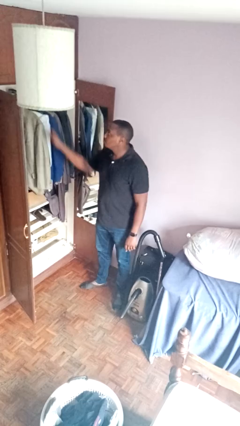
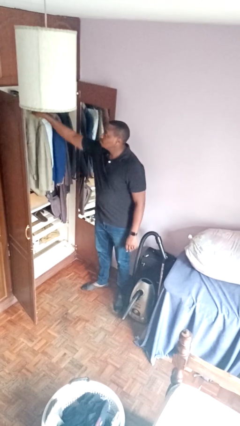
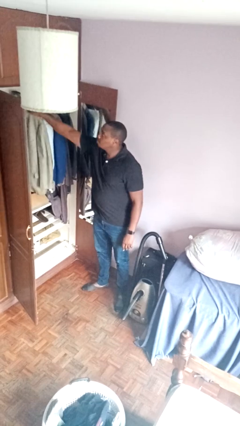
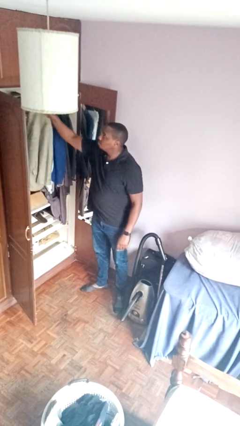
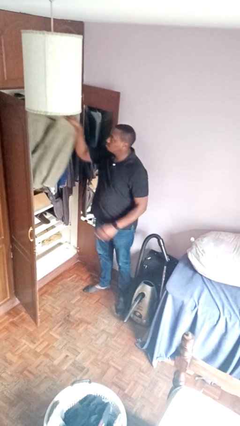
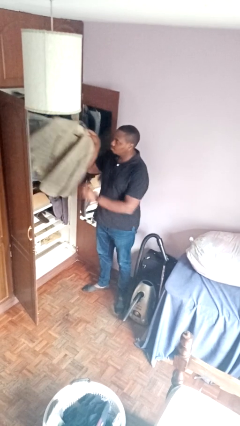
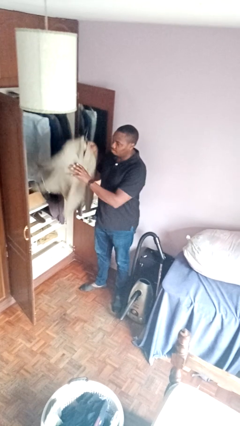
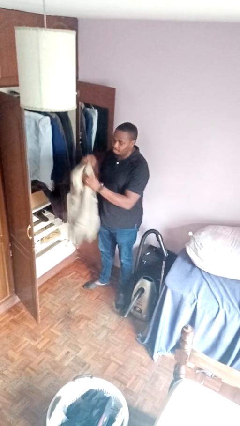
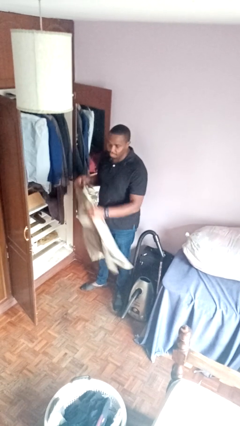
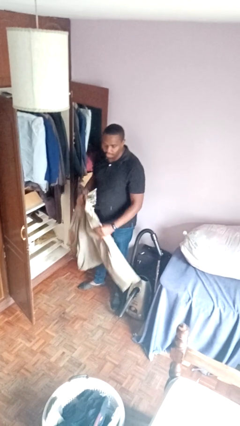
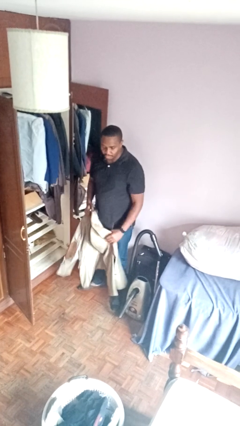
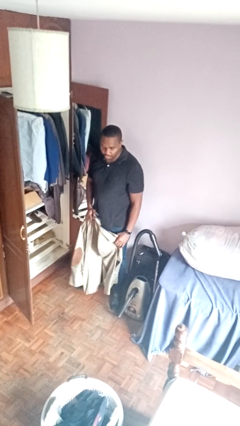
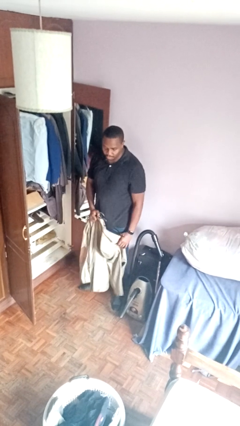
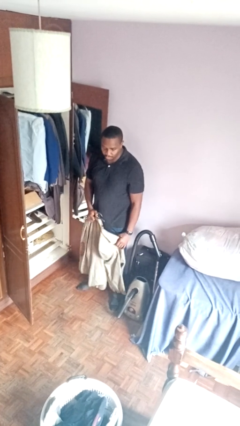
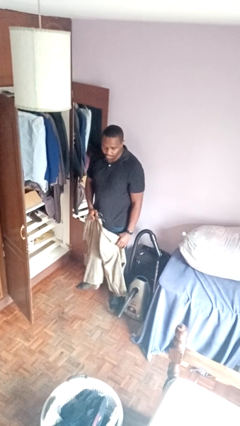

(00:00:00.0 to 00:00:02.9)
person takes clothes from closet

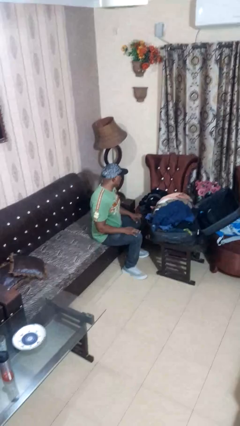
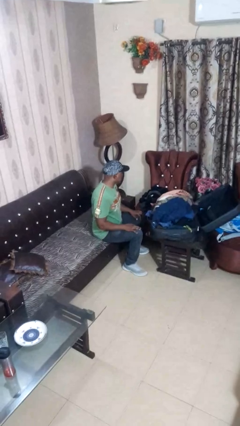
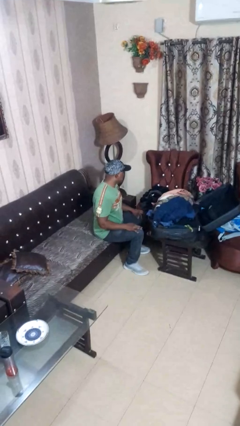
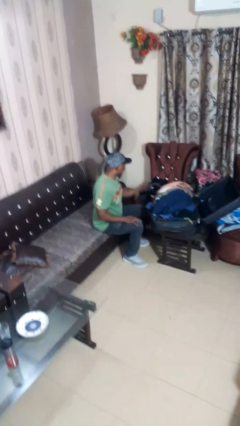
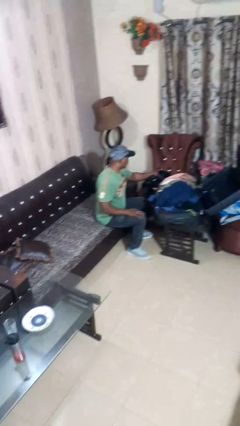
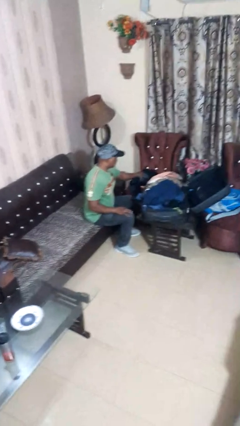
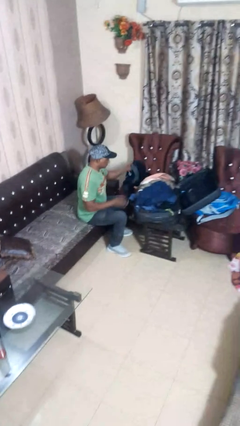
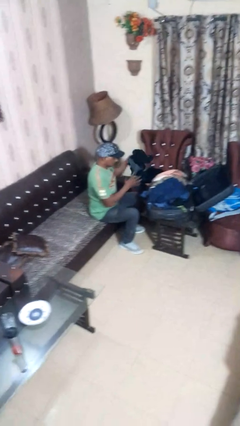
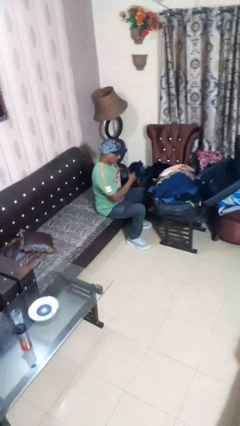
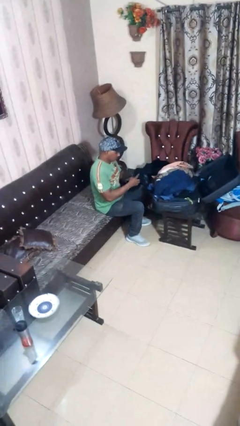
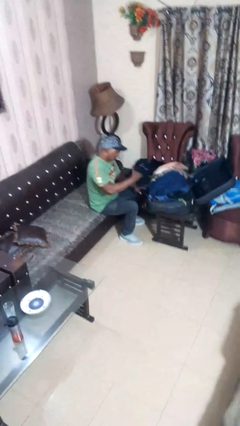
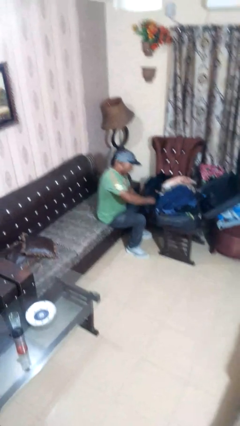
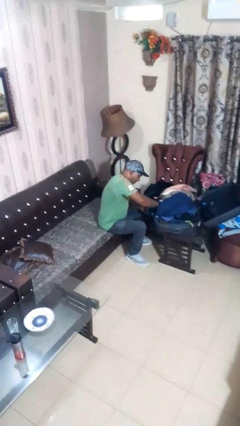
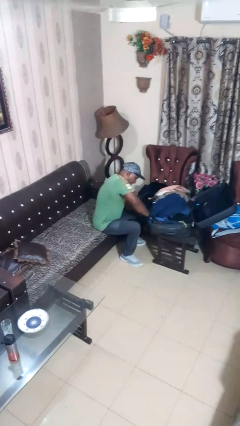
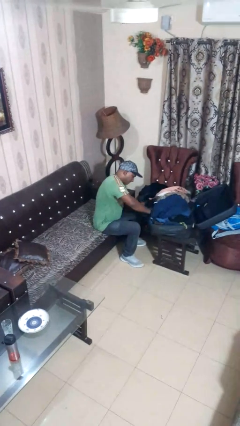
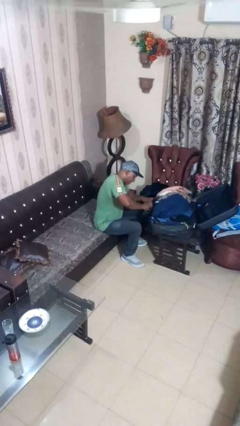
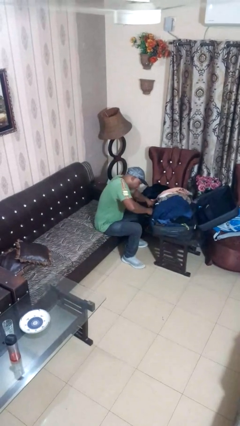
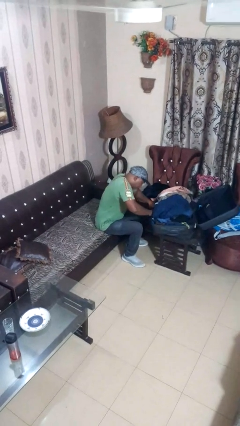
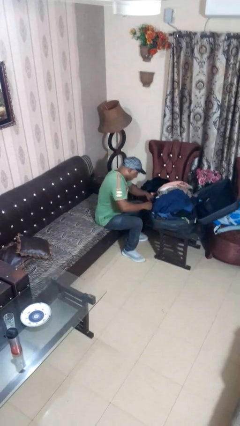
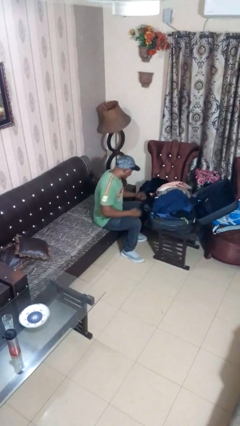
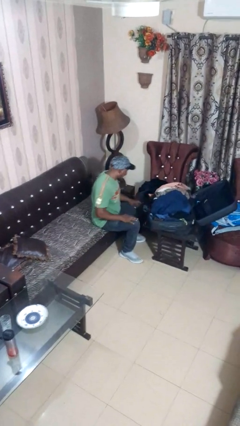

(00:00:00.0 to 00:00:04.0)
person loads clothes into suitcase

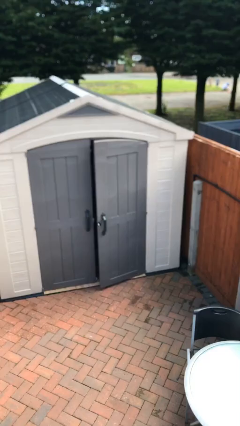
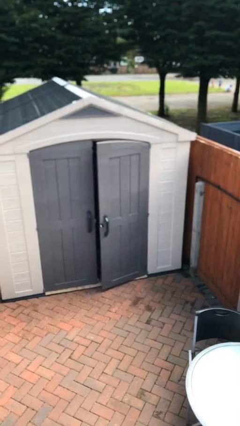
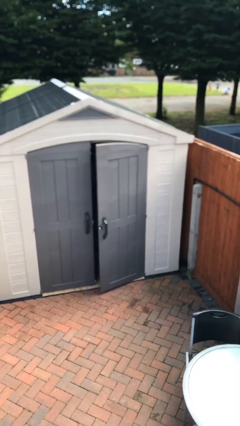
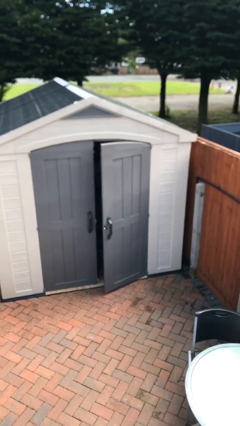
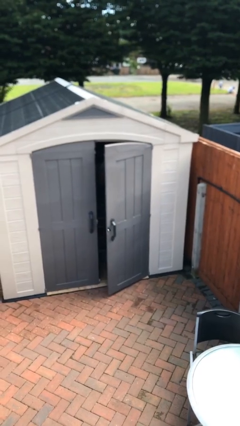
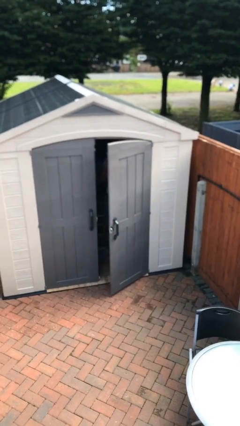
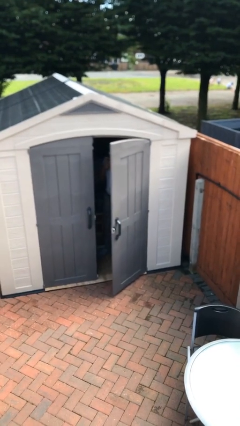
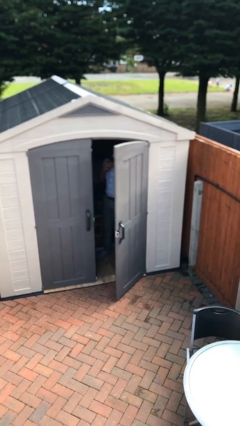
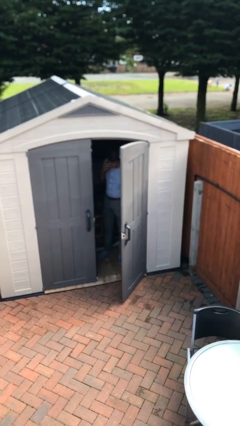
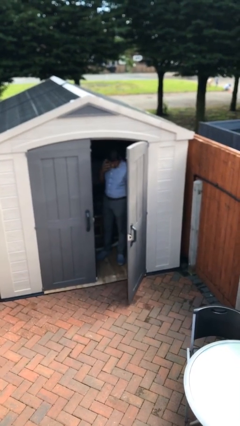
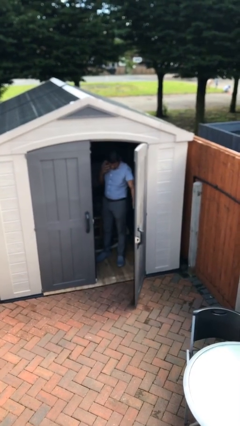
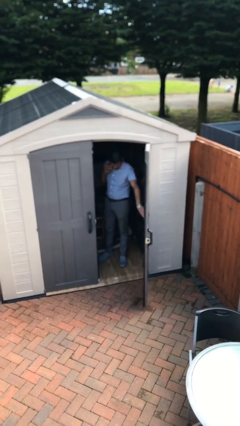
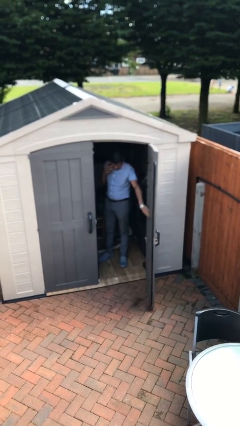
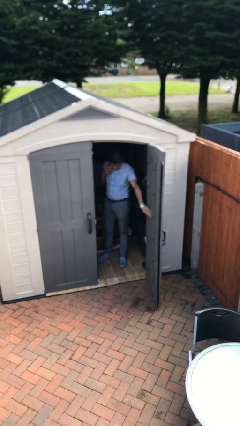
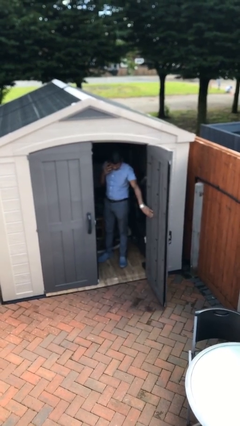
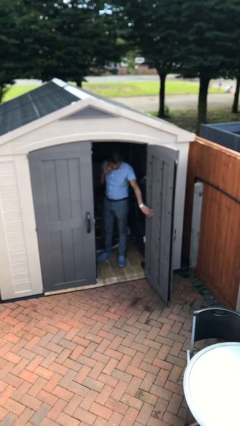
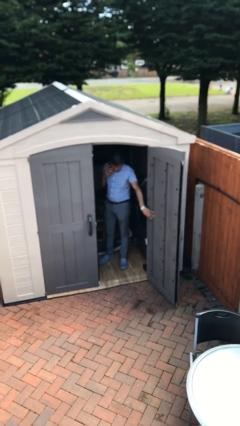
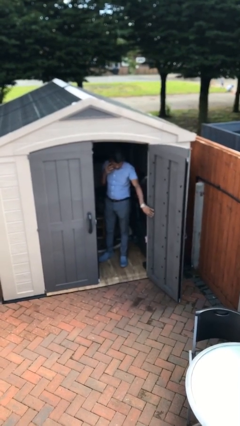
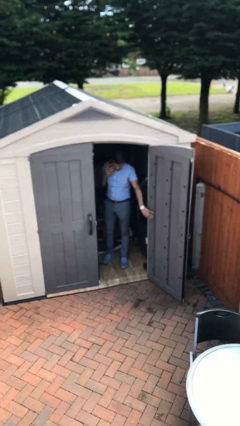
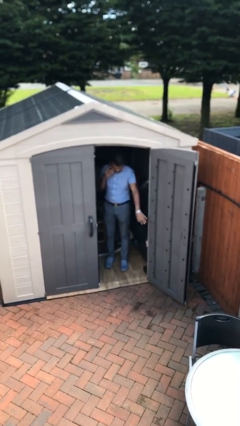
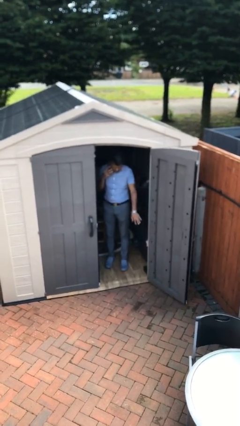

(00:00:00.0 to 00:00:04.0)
person opens facility door

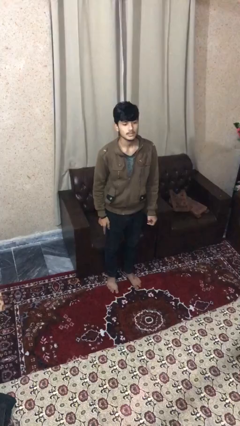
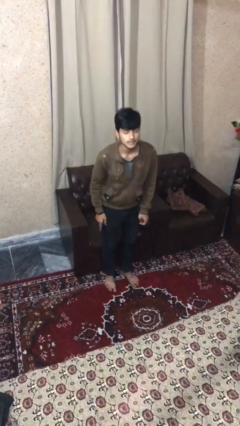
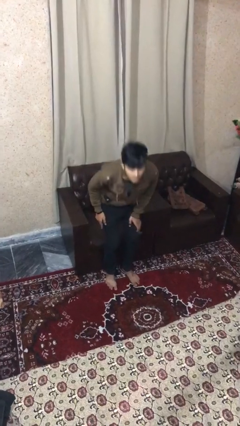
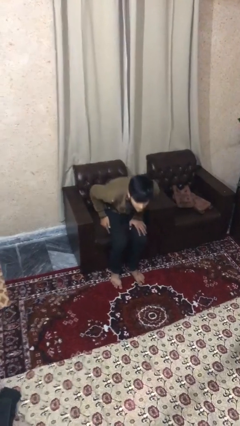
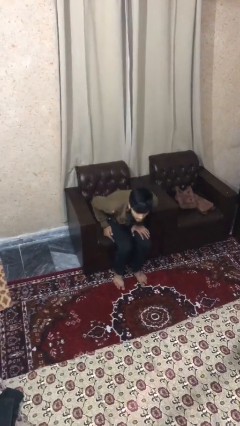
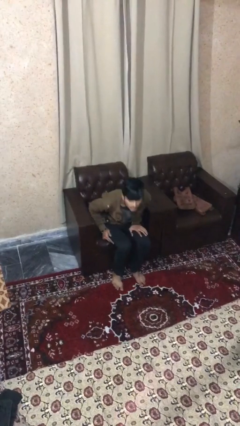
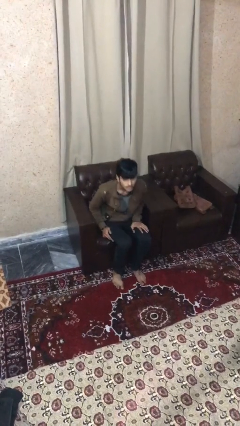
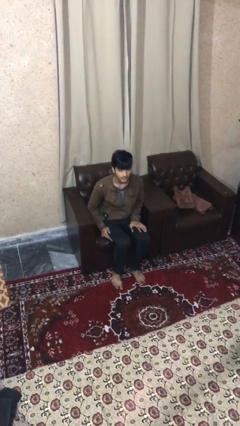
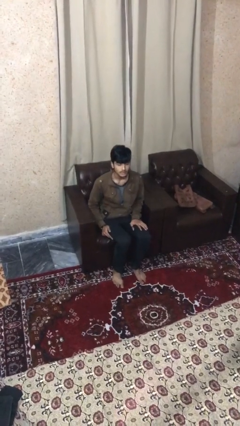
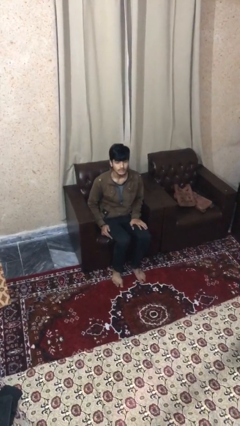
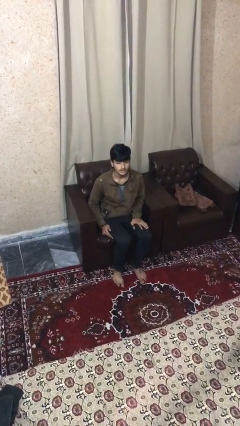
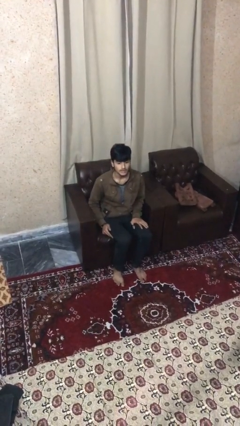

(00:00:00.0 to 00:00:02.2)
person sits down

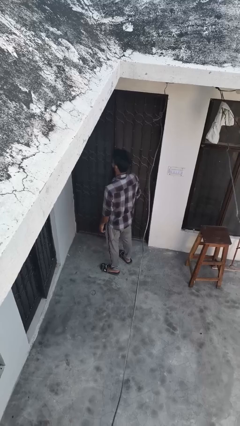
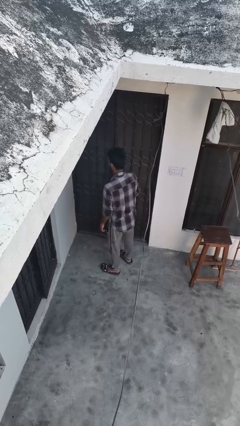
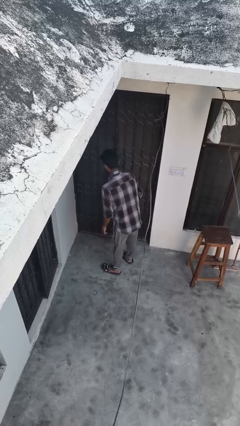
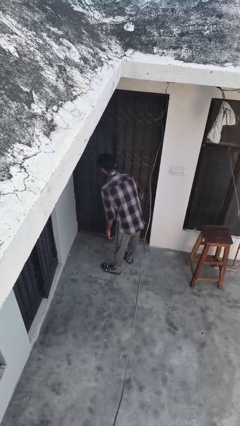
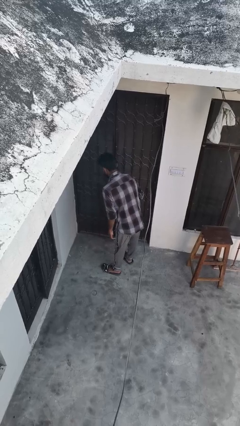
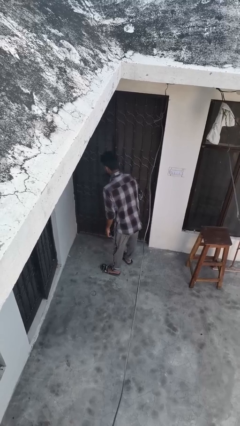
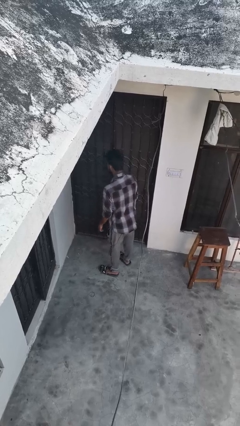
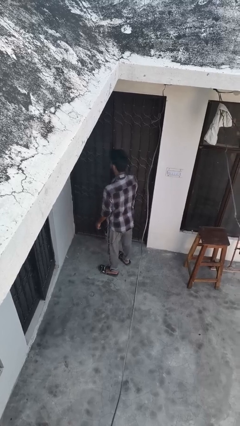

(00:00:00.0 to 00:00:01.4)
person bows

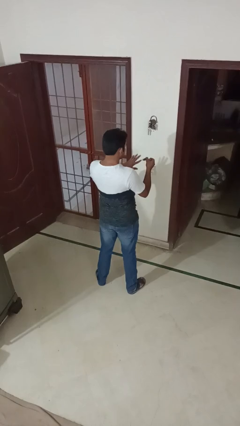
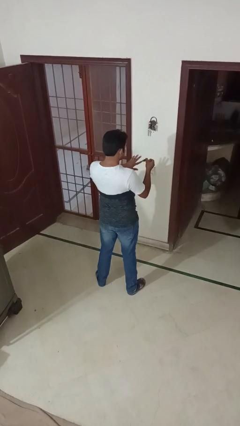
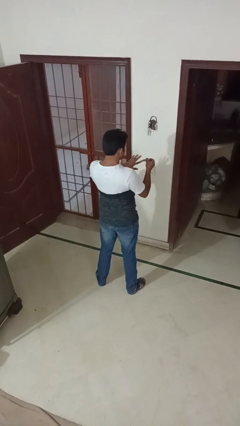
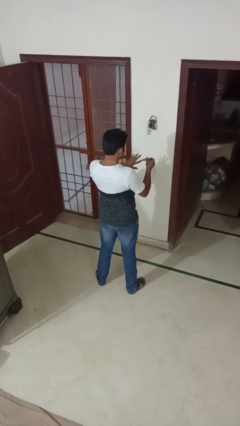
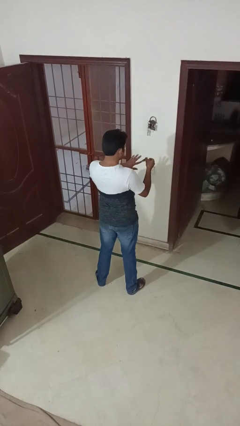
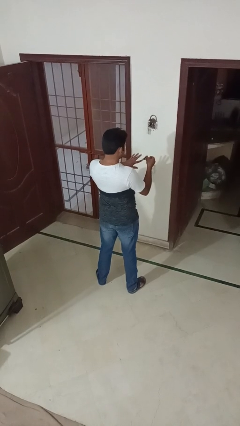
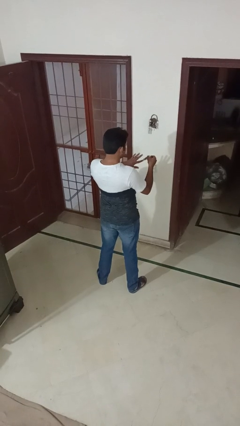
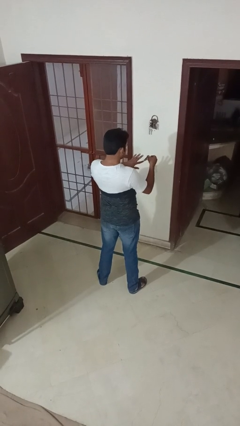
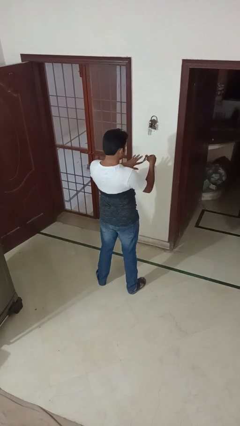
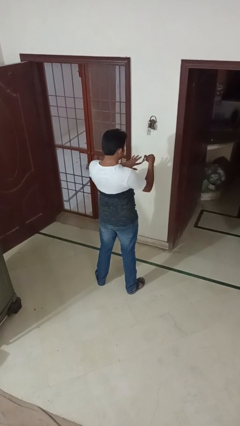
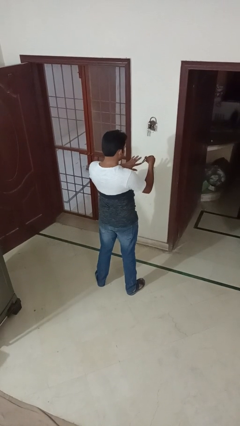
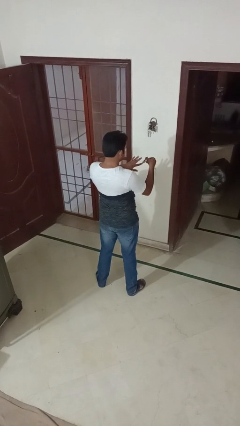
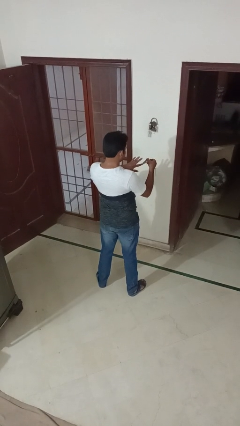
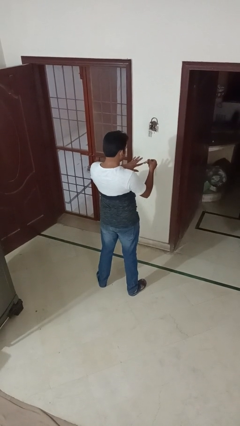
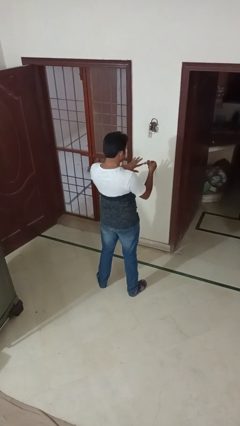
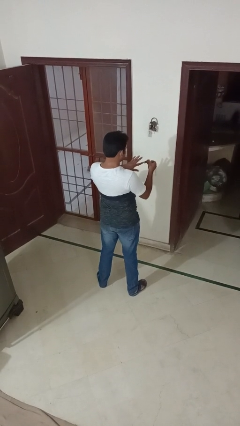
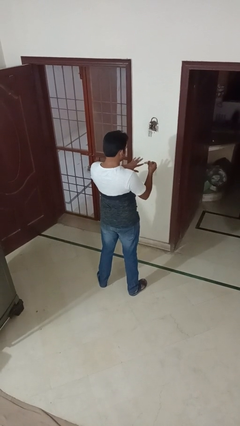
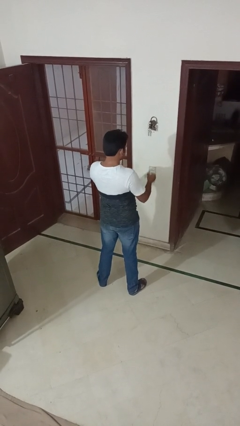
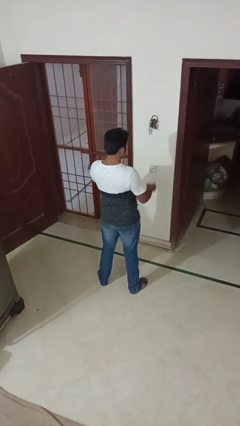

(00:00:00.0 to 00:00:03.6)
person clips fingernails
